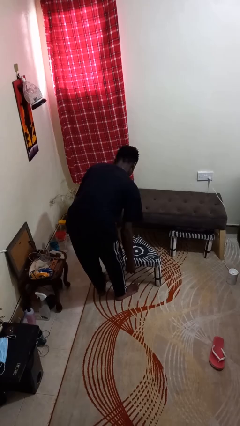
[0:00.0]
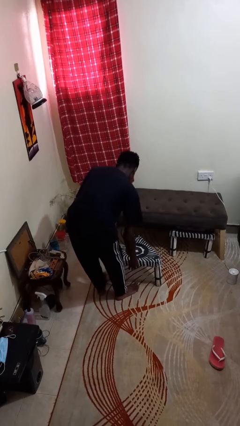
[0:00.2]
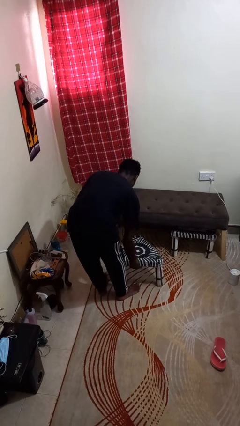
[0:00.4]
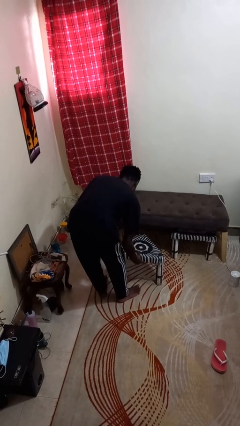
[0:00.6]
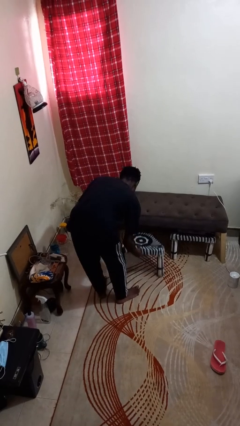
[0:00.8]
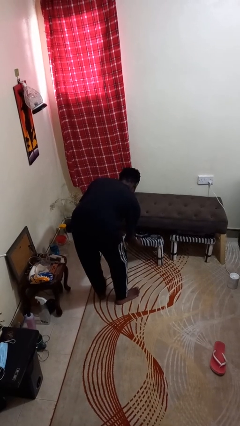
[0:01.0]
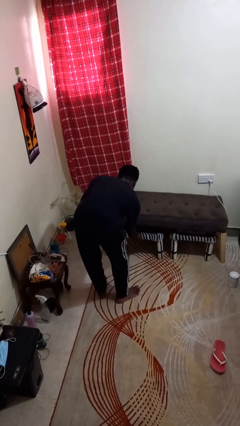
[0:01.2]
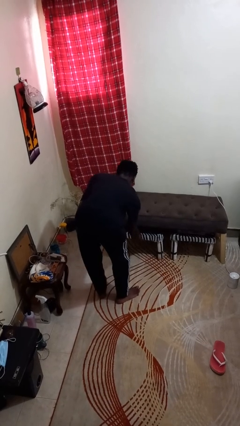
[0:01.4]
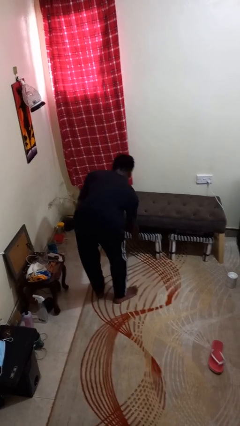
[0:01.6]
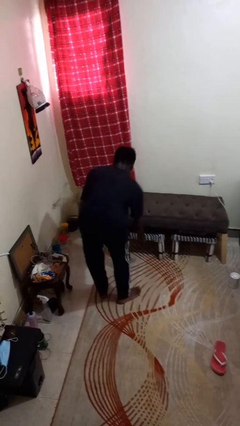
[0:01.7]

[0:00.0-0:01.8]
person pushes in chair

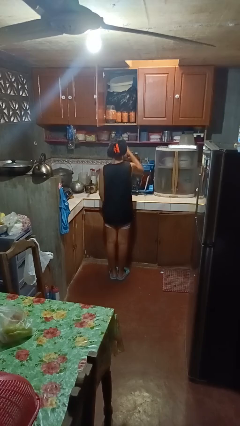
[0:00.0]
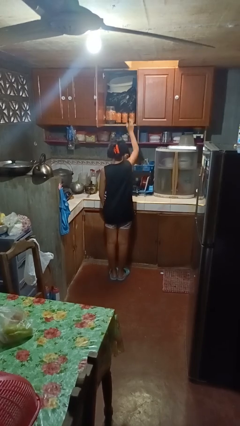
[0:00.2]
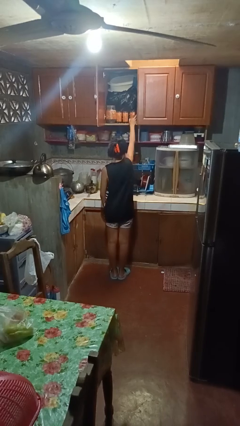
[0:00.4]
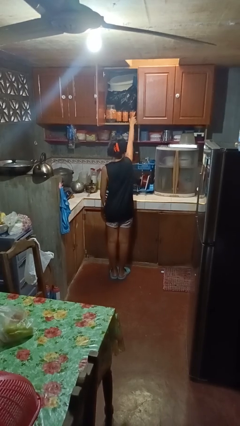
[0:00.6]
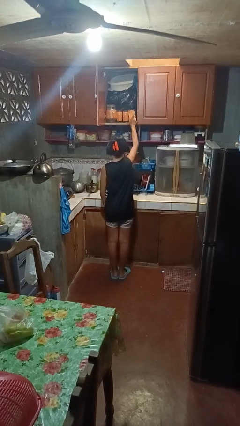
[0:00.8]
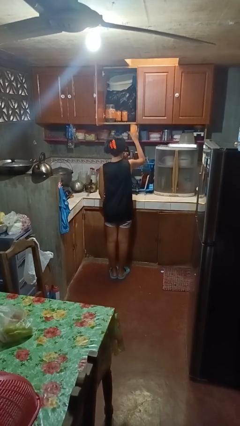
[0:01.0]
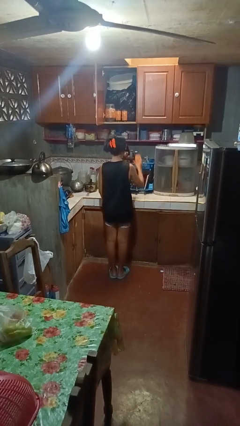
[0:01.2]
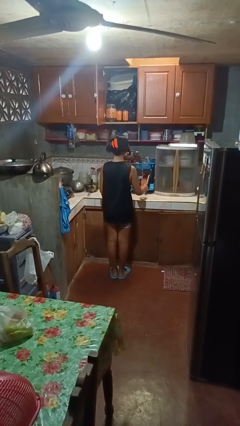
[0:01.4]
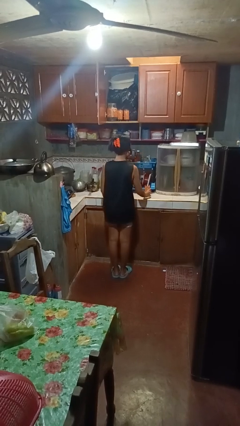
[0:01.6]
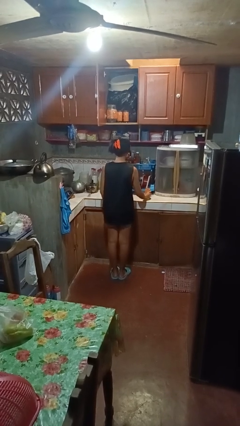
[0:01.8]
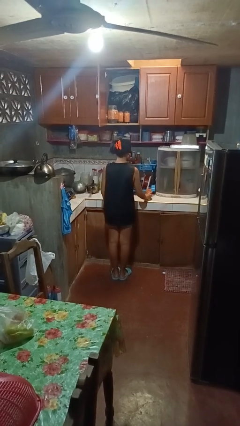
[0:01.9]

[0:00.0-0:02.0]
person takes object from cabinet

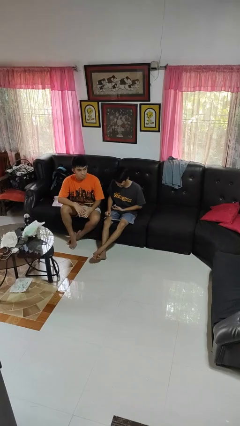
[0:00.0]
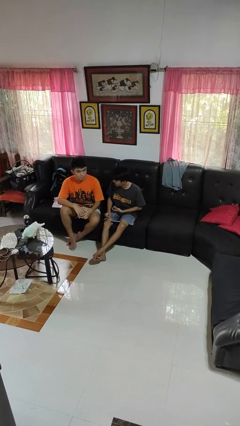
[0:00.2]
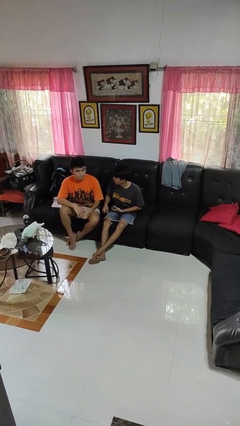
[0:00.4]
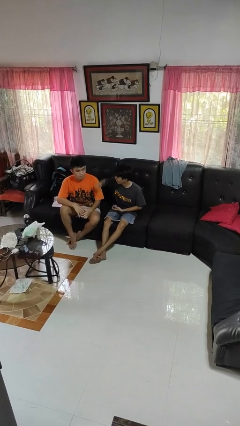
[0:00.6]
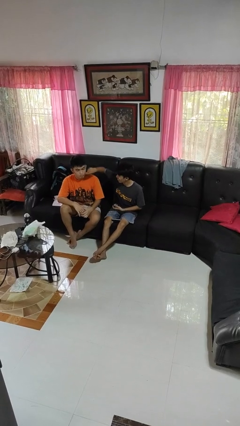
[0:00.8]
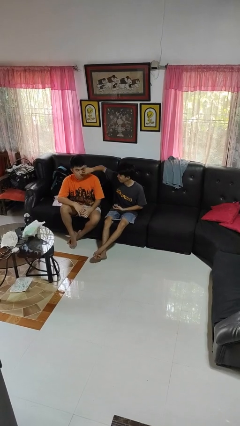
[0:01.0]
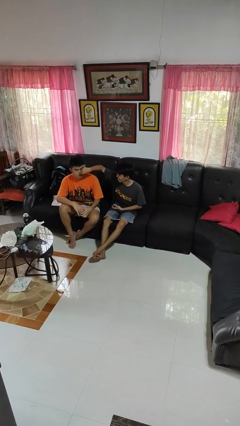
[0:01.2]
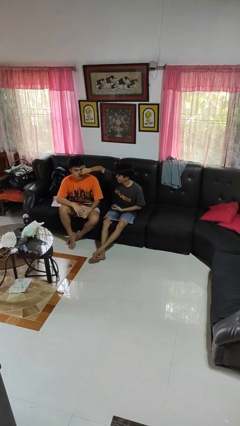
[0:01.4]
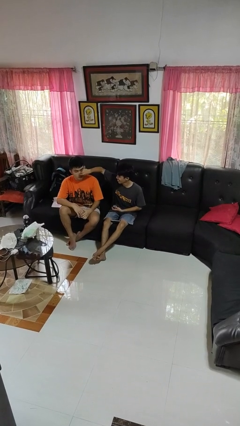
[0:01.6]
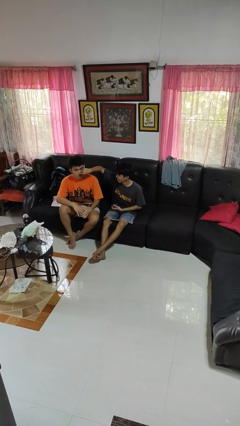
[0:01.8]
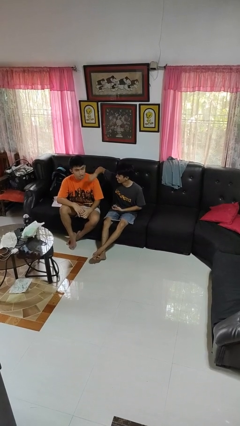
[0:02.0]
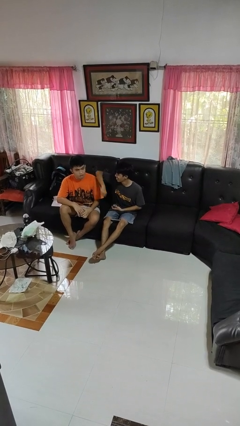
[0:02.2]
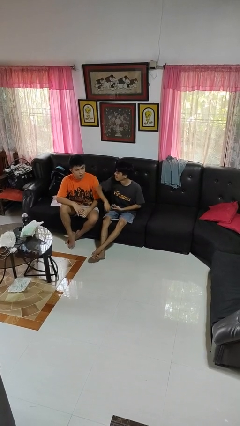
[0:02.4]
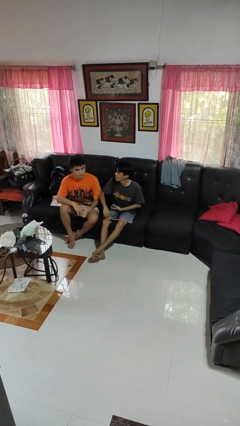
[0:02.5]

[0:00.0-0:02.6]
person touches face of person

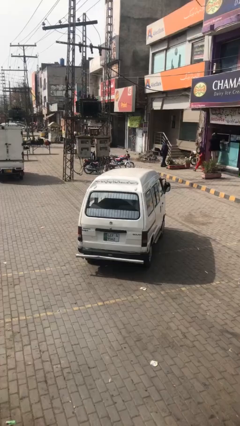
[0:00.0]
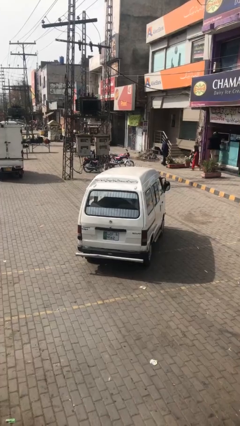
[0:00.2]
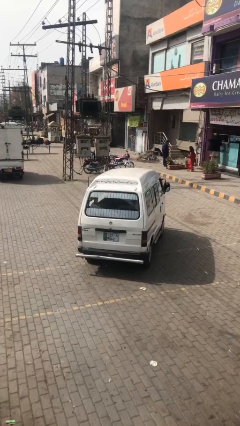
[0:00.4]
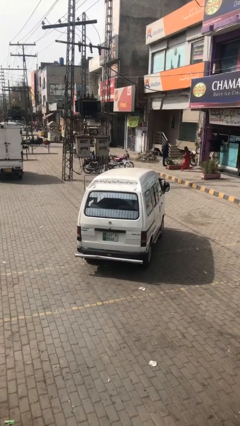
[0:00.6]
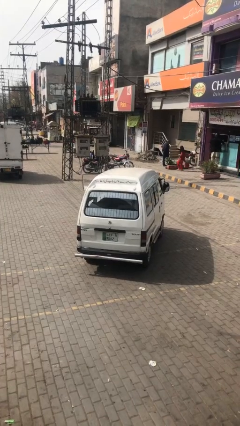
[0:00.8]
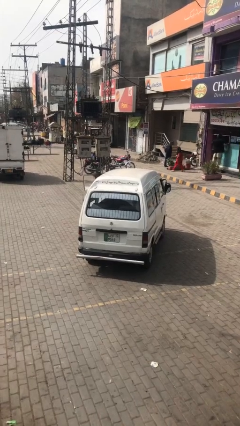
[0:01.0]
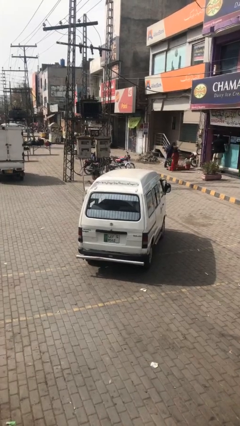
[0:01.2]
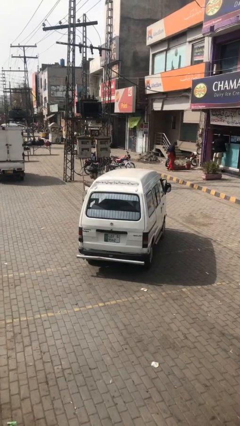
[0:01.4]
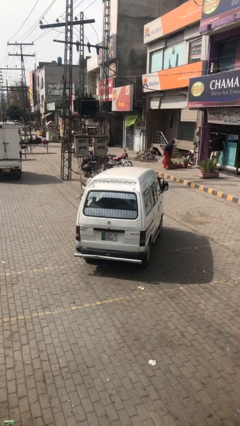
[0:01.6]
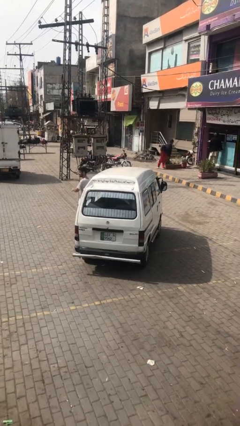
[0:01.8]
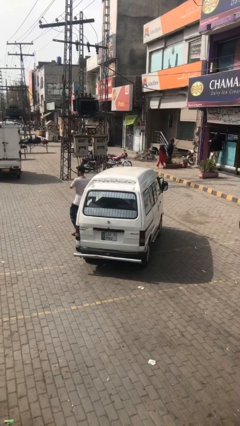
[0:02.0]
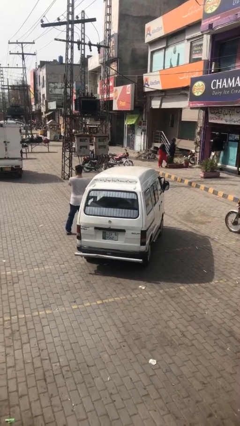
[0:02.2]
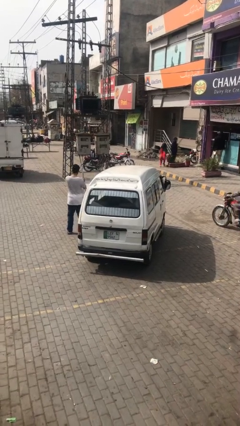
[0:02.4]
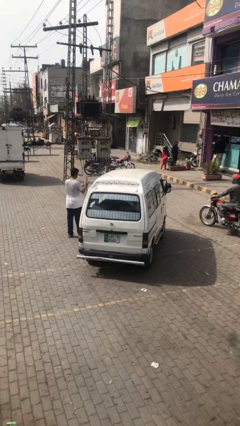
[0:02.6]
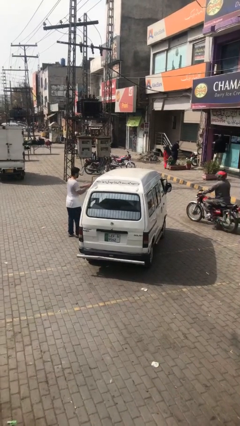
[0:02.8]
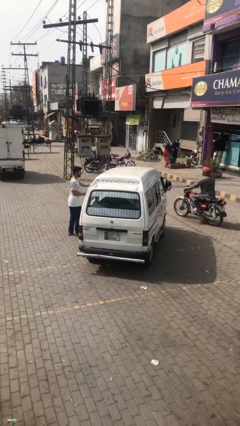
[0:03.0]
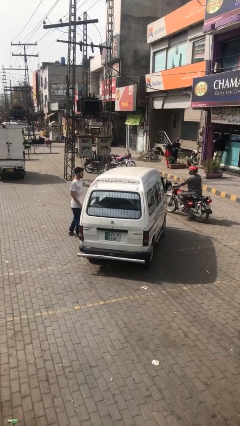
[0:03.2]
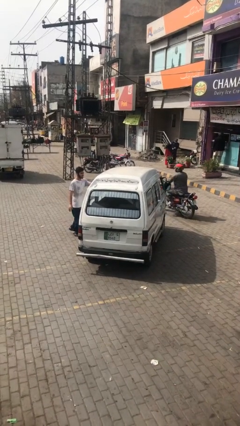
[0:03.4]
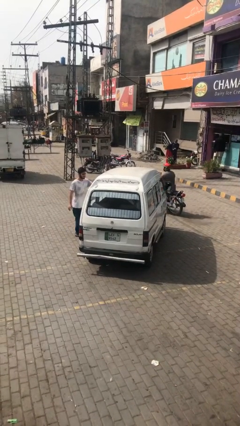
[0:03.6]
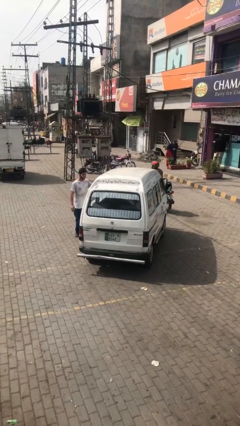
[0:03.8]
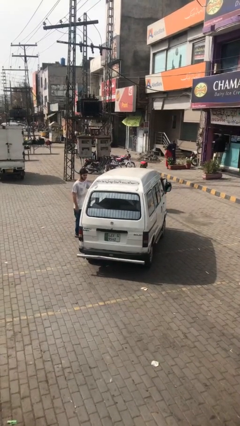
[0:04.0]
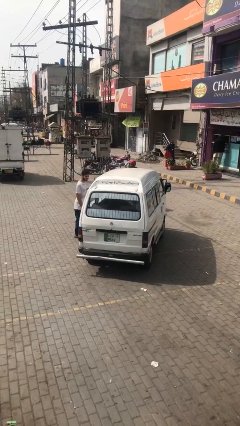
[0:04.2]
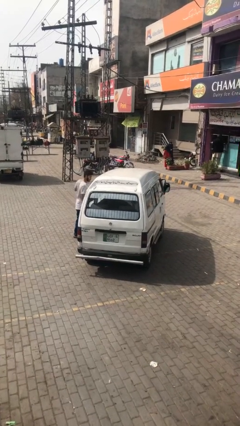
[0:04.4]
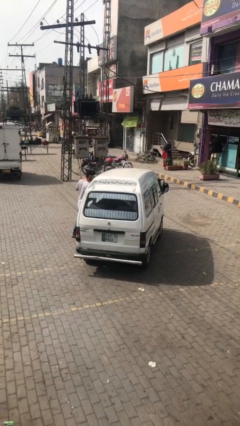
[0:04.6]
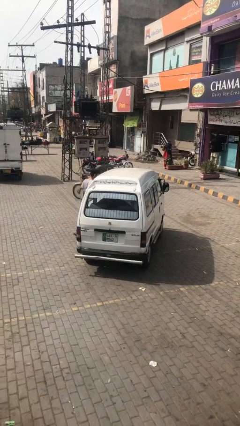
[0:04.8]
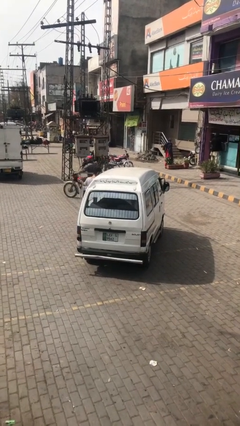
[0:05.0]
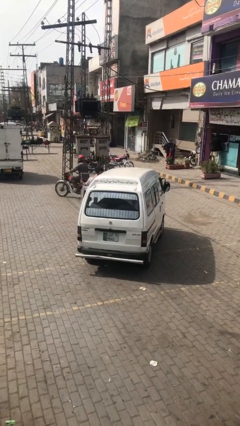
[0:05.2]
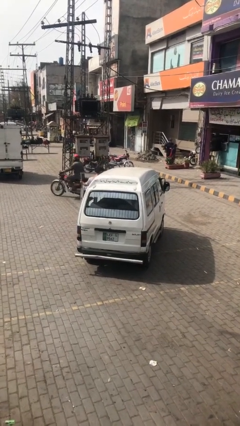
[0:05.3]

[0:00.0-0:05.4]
car drops off person

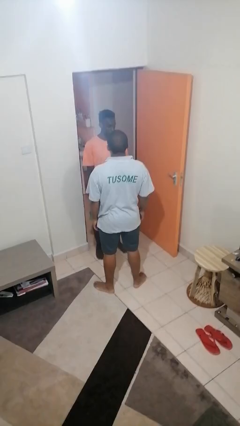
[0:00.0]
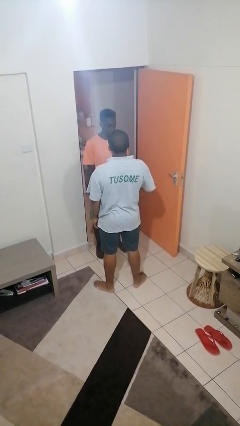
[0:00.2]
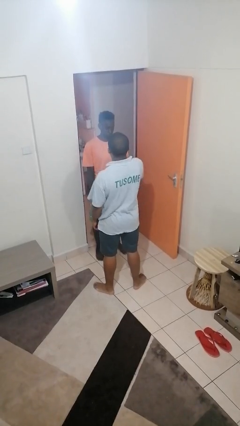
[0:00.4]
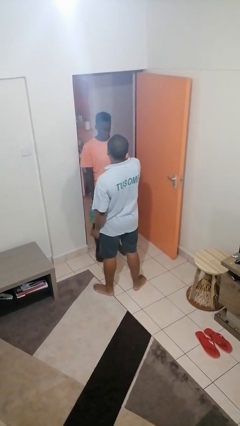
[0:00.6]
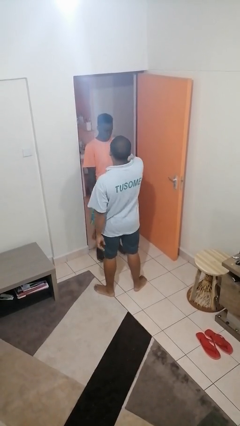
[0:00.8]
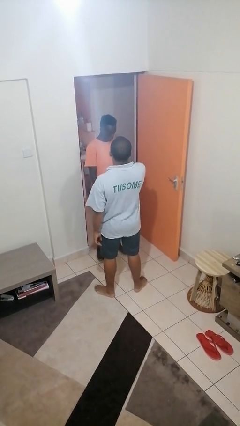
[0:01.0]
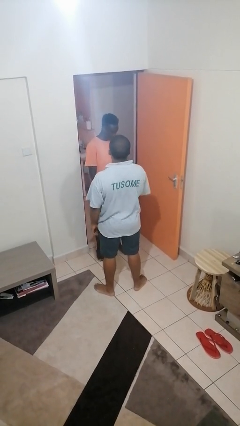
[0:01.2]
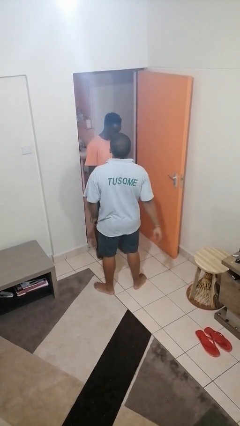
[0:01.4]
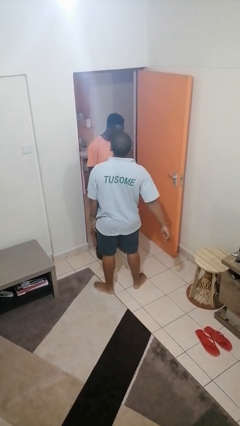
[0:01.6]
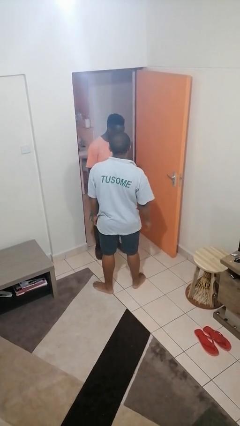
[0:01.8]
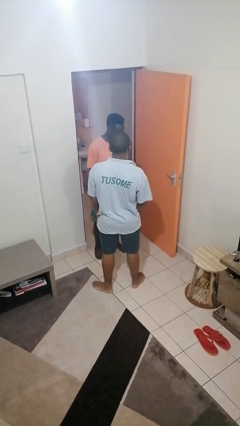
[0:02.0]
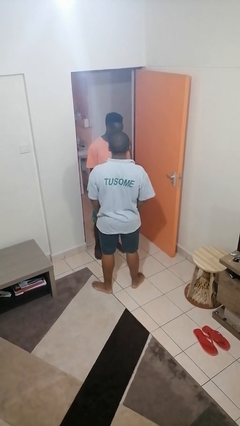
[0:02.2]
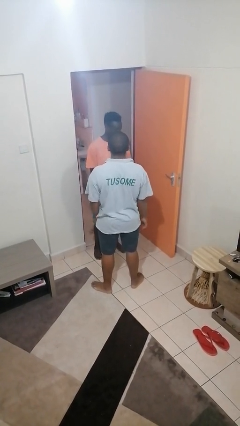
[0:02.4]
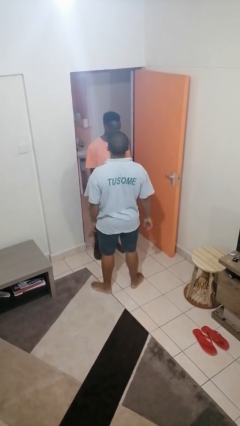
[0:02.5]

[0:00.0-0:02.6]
person shoves person

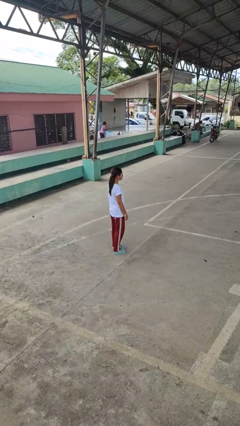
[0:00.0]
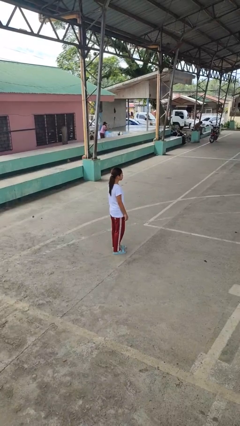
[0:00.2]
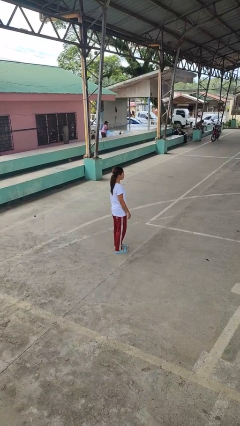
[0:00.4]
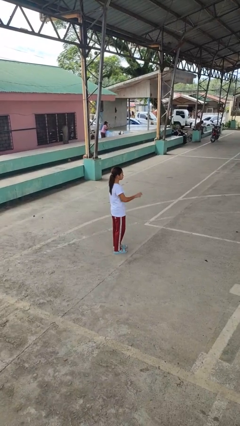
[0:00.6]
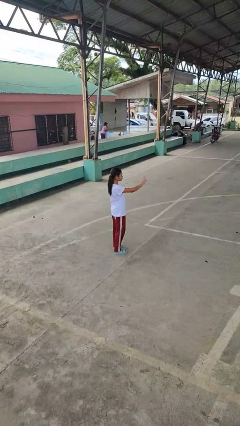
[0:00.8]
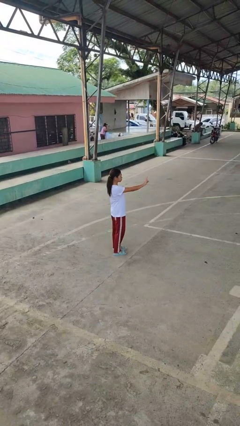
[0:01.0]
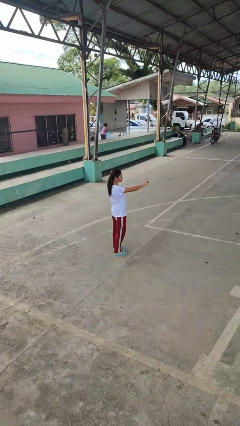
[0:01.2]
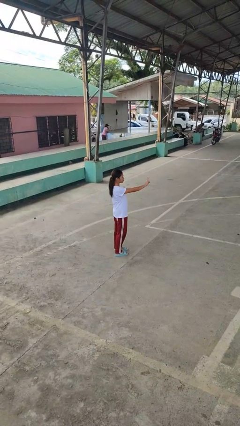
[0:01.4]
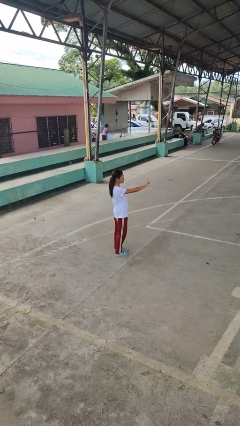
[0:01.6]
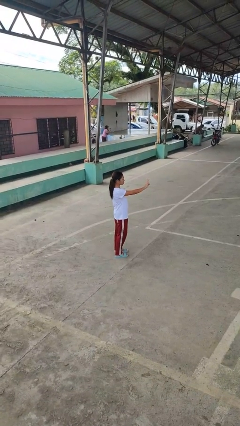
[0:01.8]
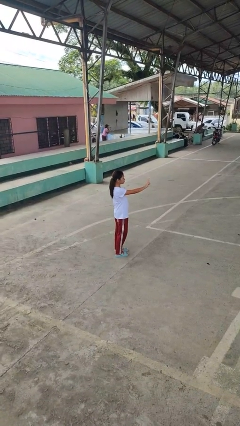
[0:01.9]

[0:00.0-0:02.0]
person gestures peace
